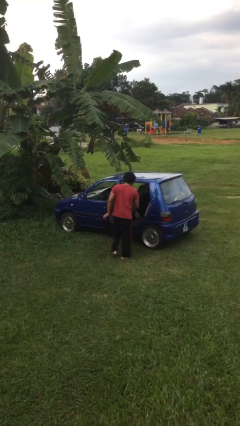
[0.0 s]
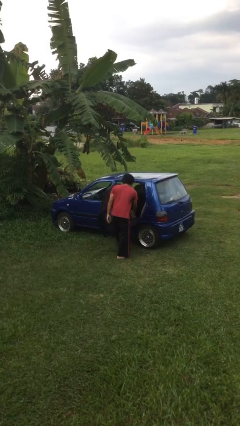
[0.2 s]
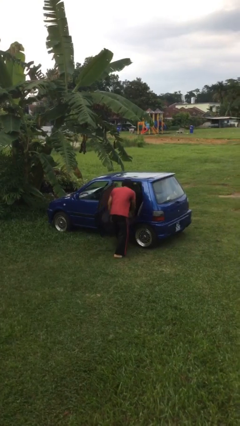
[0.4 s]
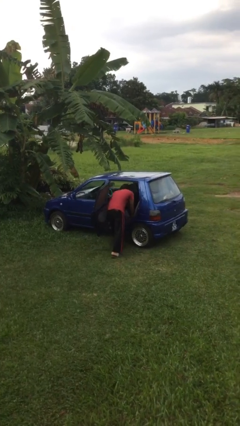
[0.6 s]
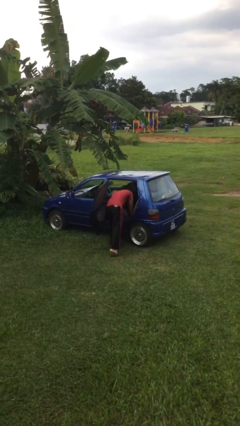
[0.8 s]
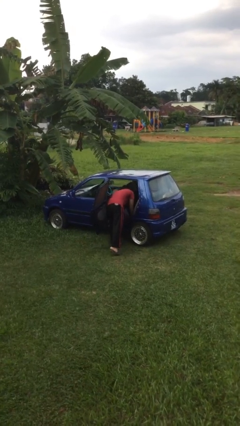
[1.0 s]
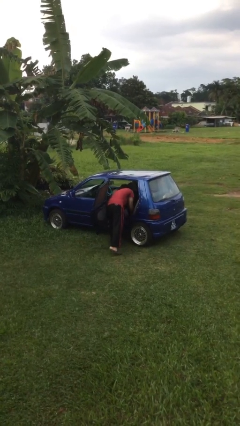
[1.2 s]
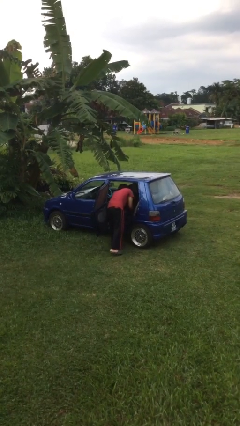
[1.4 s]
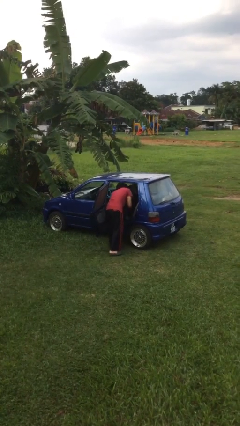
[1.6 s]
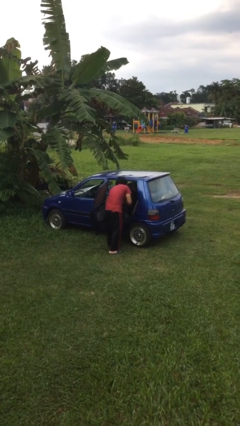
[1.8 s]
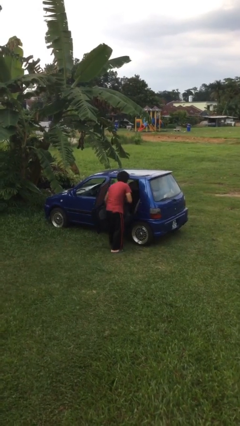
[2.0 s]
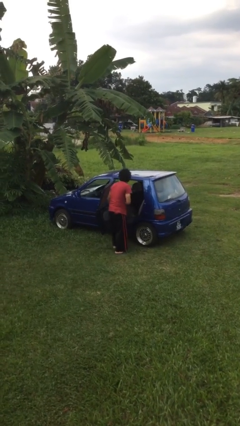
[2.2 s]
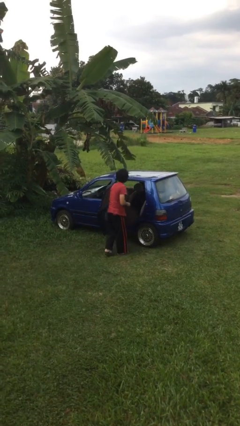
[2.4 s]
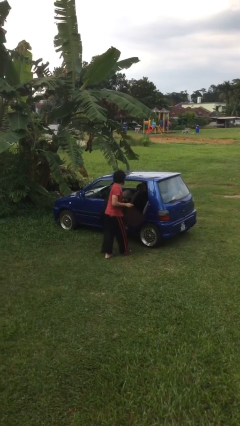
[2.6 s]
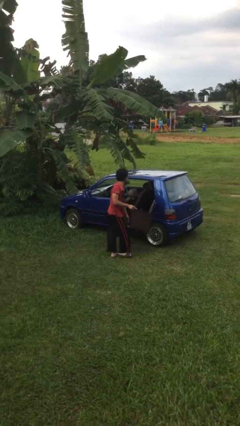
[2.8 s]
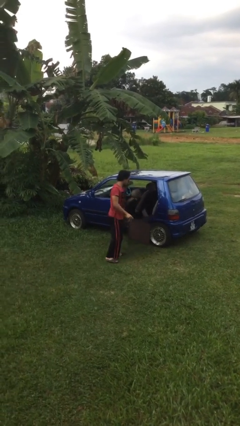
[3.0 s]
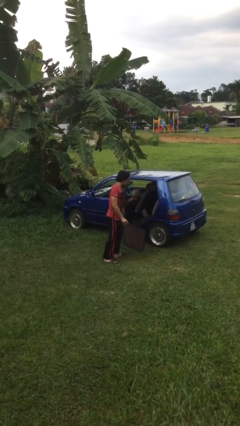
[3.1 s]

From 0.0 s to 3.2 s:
person unloads car

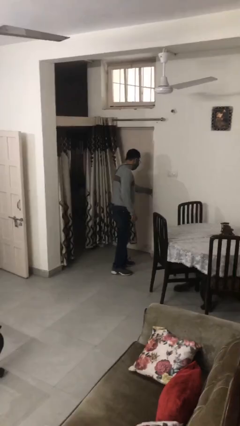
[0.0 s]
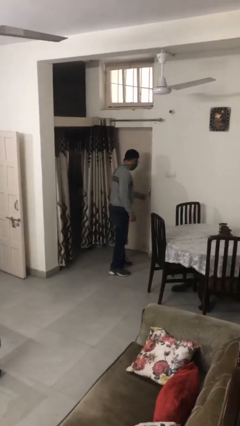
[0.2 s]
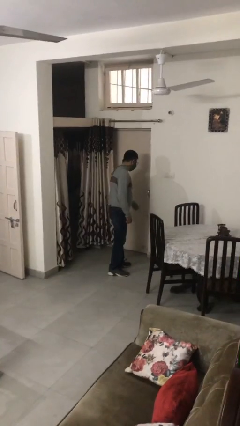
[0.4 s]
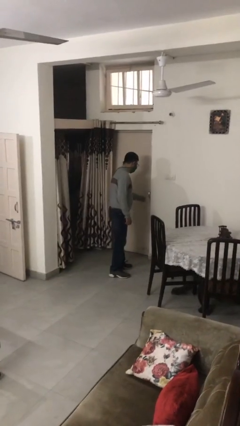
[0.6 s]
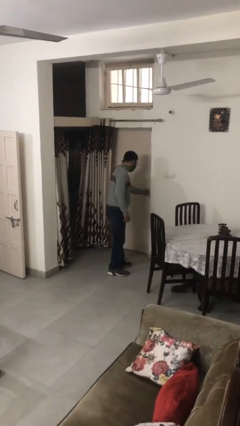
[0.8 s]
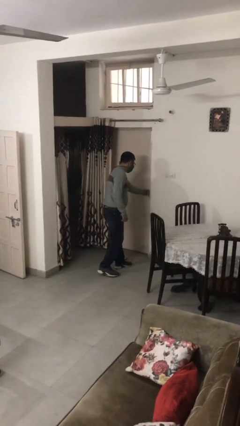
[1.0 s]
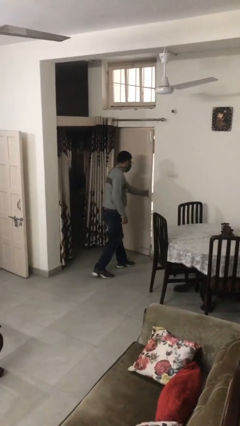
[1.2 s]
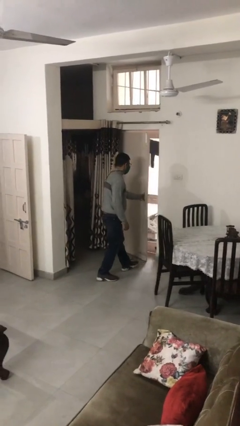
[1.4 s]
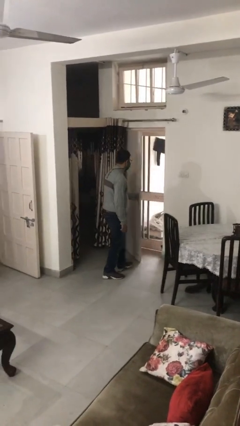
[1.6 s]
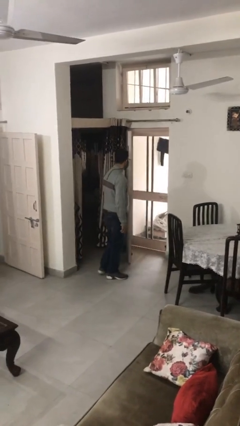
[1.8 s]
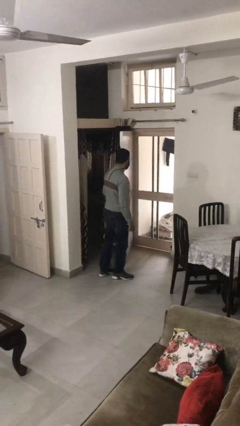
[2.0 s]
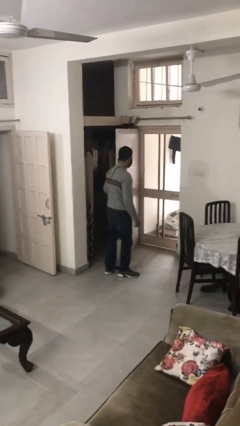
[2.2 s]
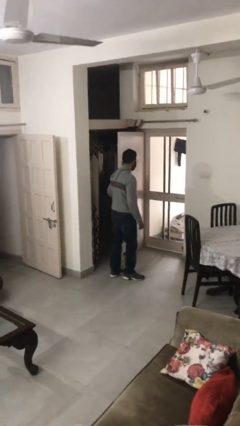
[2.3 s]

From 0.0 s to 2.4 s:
person opens facility door

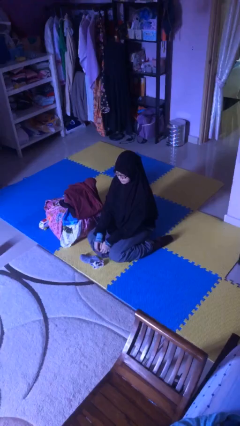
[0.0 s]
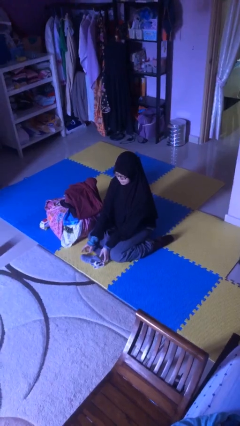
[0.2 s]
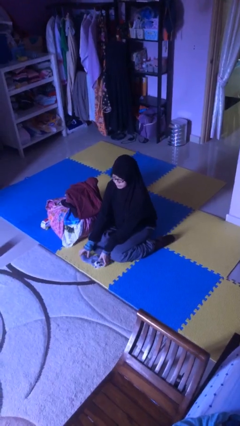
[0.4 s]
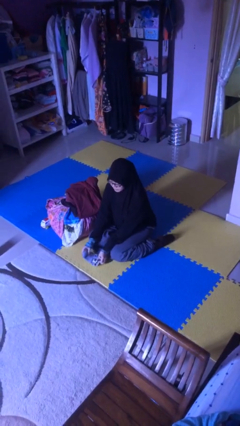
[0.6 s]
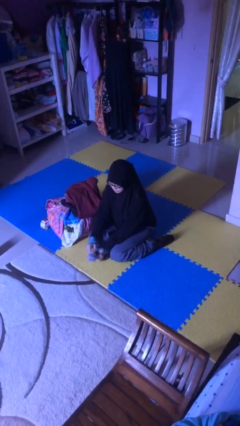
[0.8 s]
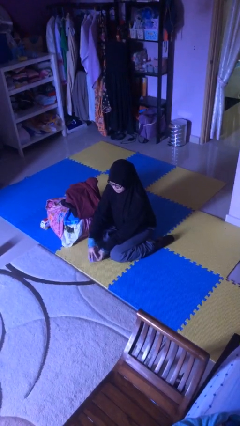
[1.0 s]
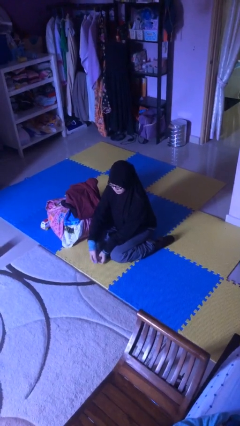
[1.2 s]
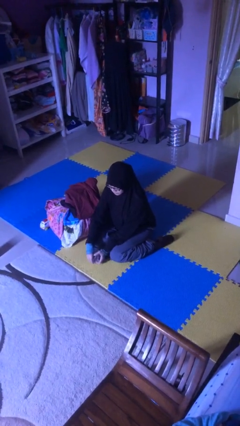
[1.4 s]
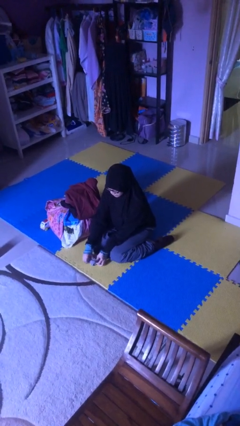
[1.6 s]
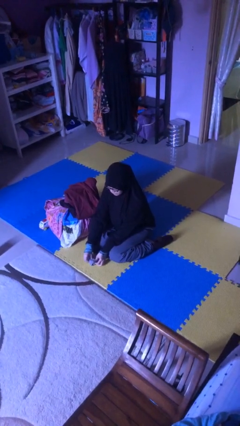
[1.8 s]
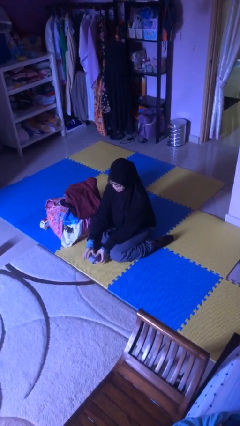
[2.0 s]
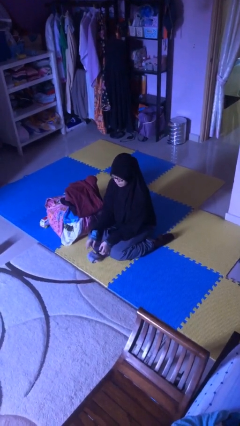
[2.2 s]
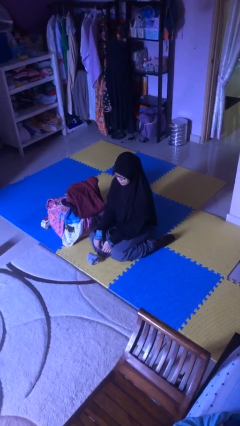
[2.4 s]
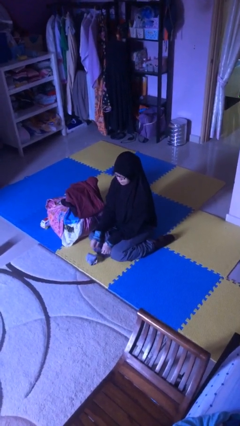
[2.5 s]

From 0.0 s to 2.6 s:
person folds socks

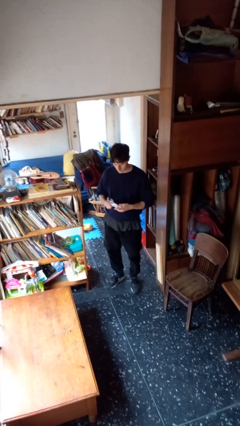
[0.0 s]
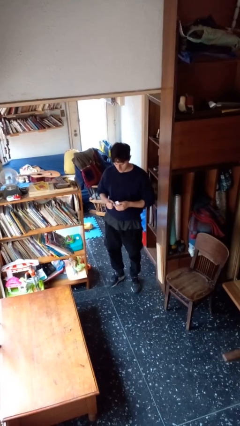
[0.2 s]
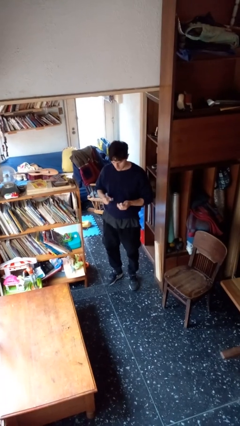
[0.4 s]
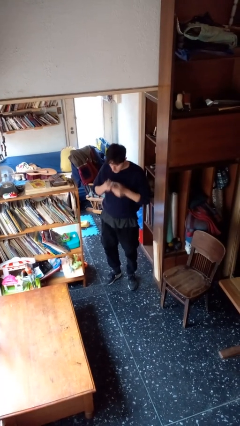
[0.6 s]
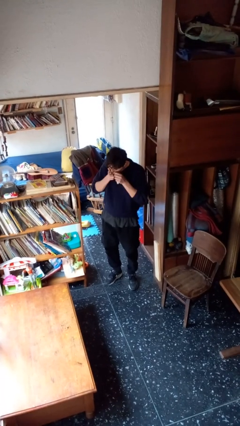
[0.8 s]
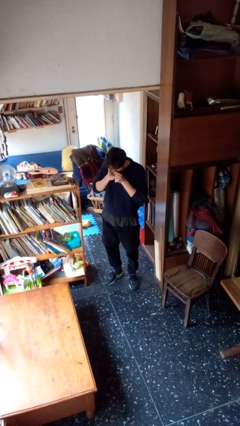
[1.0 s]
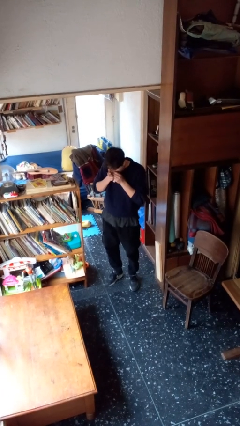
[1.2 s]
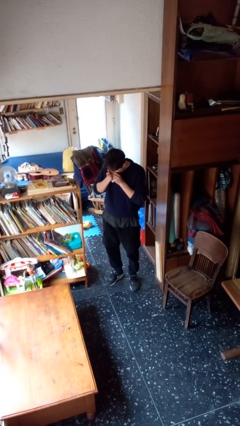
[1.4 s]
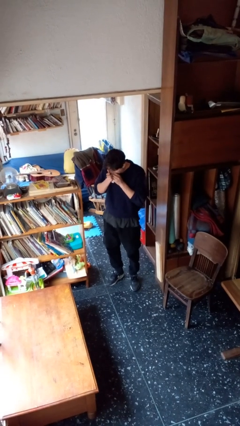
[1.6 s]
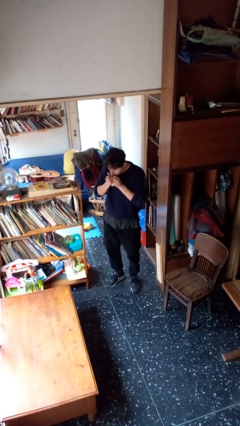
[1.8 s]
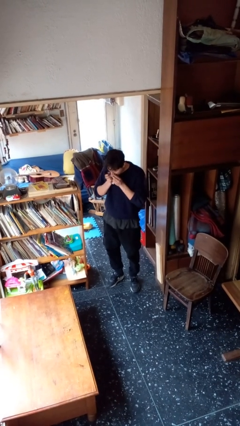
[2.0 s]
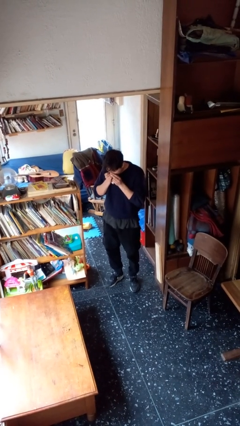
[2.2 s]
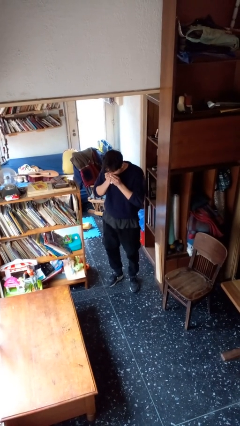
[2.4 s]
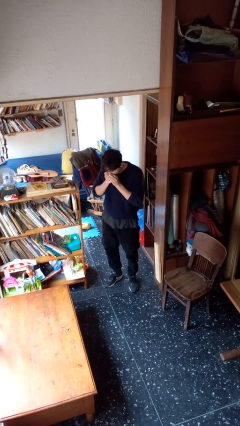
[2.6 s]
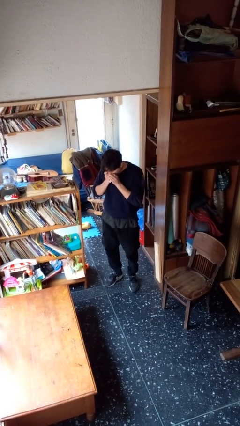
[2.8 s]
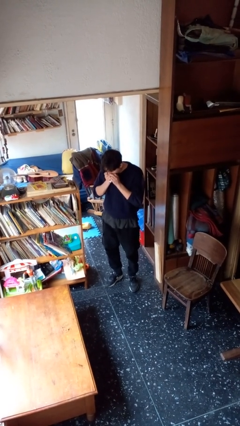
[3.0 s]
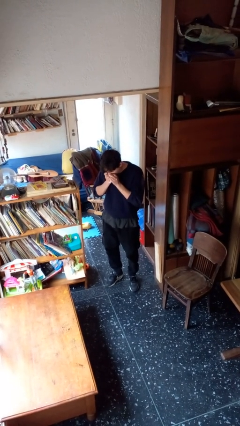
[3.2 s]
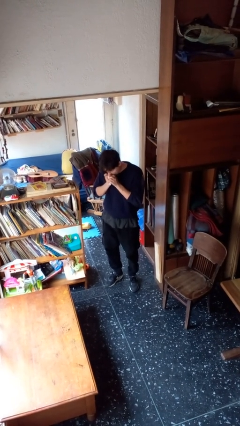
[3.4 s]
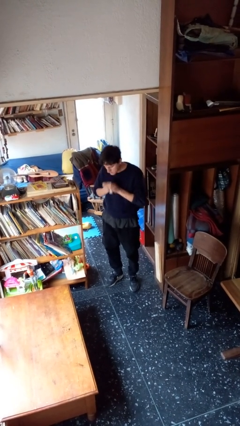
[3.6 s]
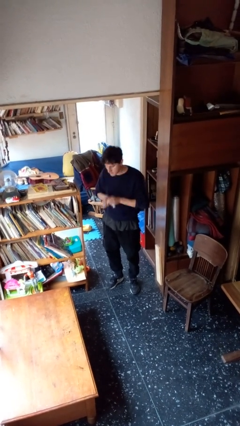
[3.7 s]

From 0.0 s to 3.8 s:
person blows nose

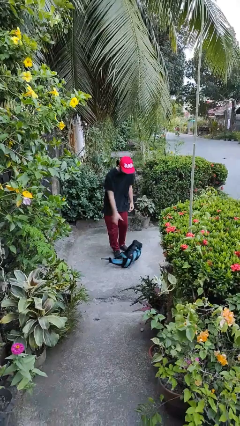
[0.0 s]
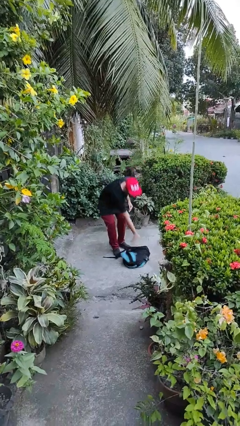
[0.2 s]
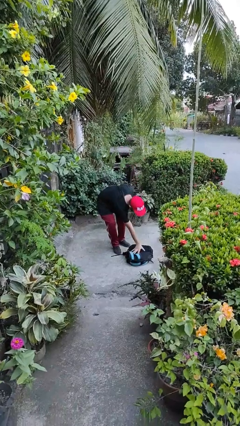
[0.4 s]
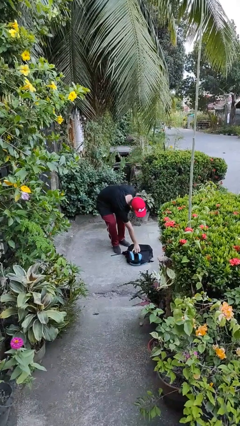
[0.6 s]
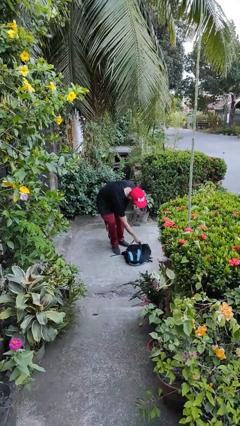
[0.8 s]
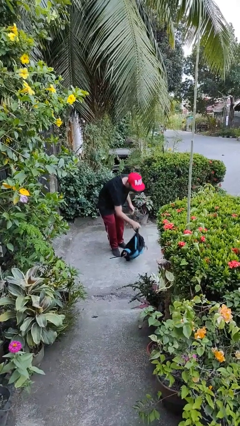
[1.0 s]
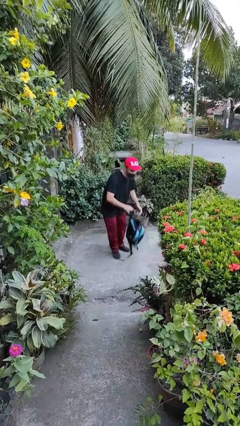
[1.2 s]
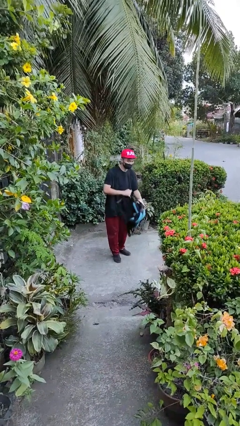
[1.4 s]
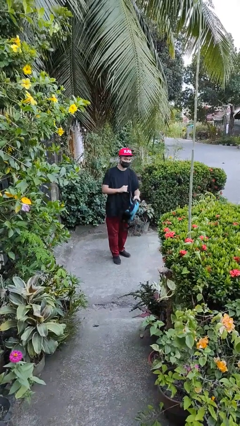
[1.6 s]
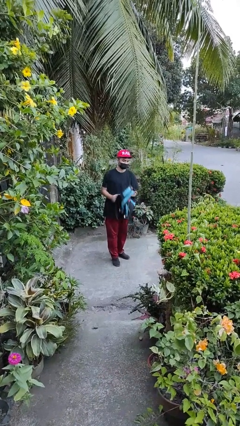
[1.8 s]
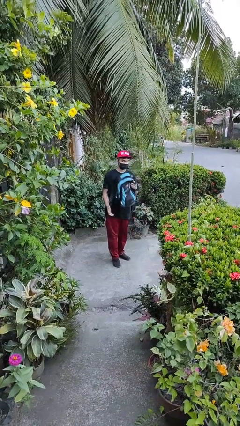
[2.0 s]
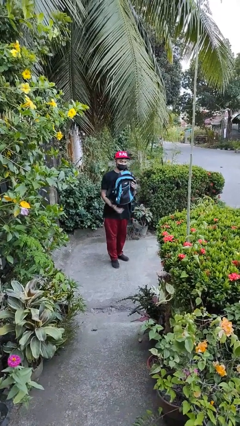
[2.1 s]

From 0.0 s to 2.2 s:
person picks up object from floor

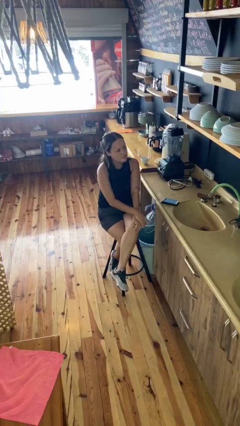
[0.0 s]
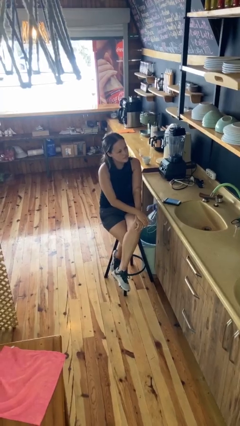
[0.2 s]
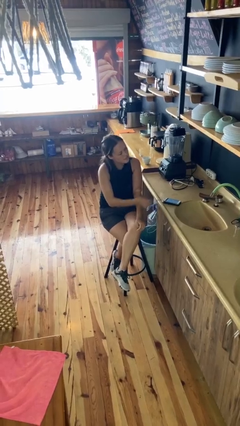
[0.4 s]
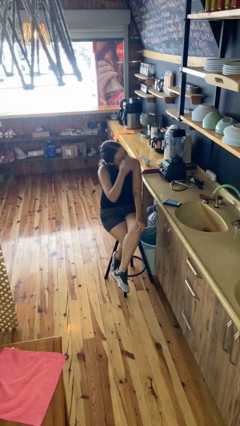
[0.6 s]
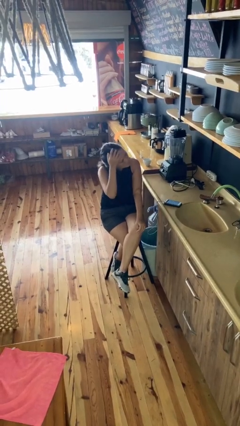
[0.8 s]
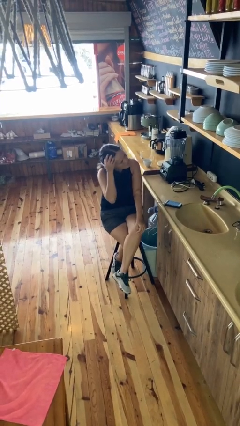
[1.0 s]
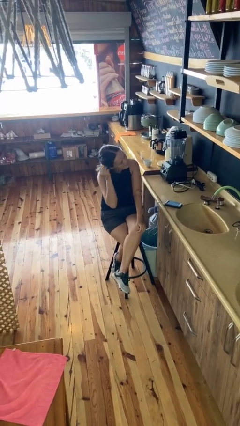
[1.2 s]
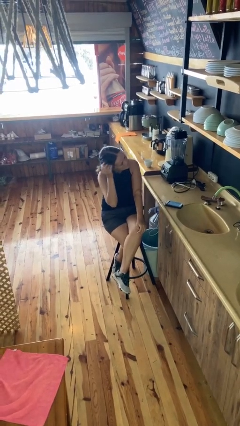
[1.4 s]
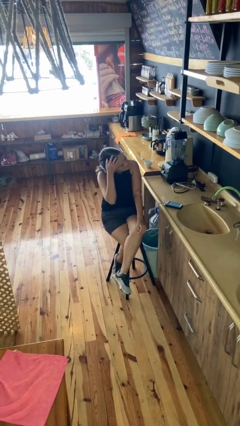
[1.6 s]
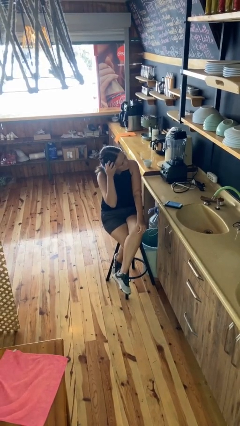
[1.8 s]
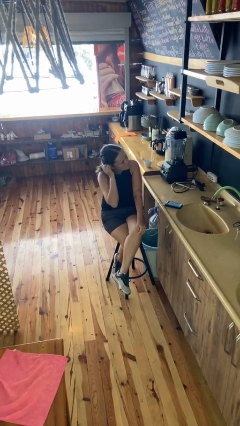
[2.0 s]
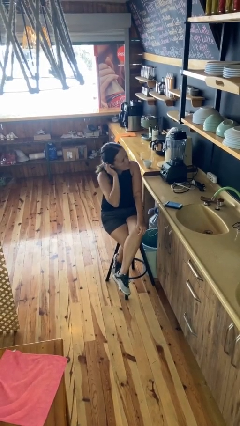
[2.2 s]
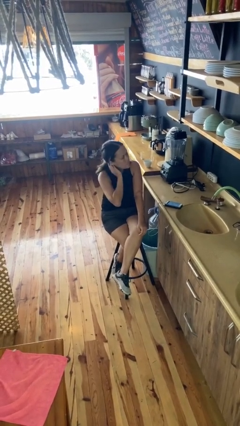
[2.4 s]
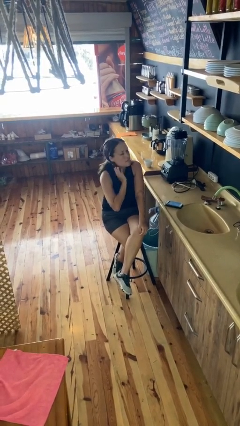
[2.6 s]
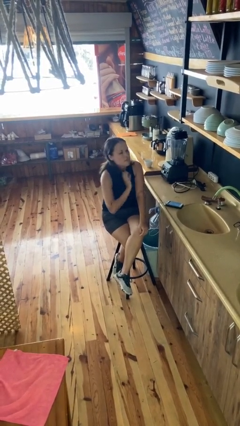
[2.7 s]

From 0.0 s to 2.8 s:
person strokes hair
